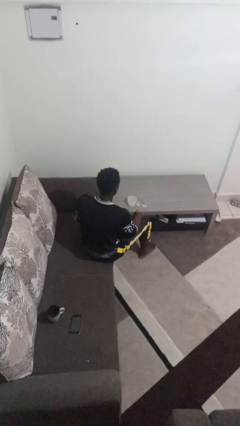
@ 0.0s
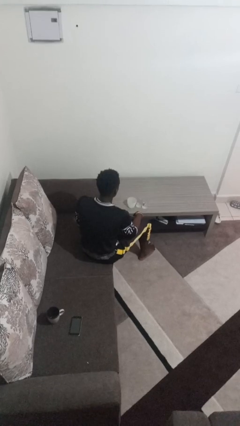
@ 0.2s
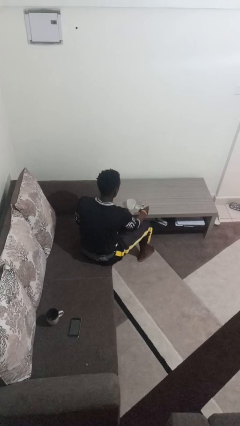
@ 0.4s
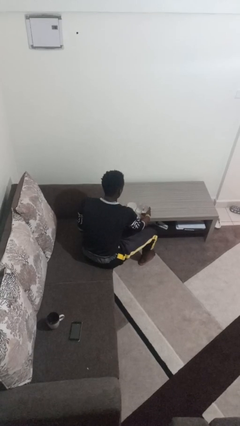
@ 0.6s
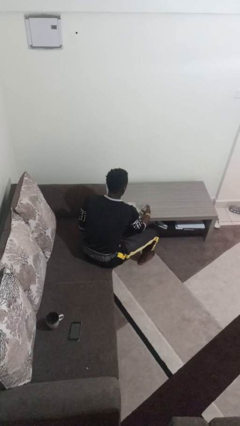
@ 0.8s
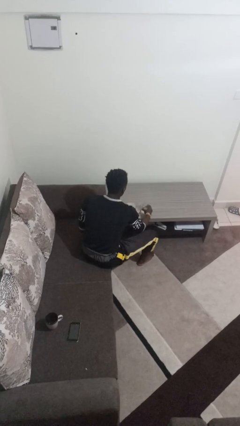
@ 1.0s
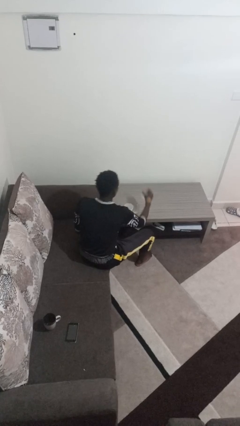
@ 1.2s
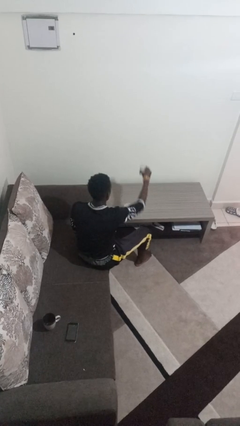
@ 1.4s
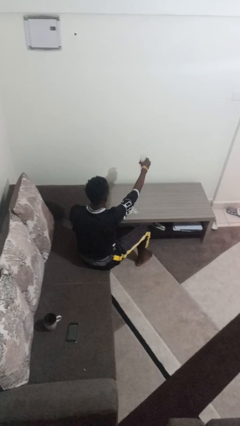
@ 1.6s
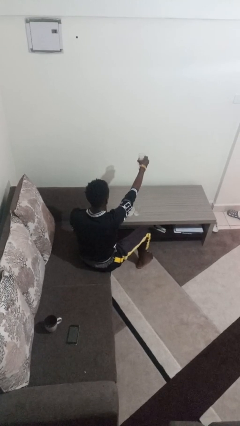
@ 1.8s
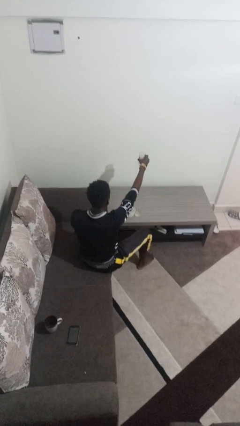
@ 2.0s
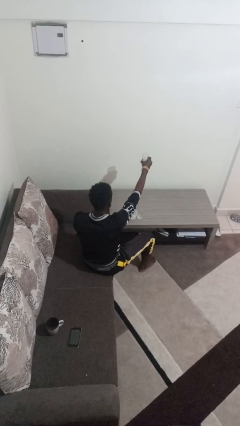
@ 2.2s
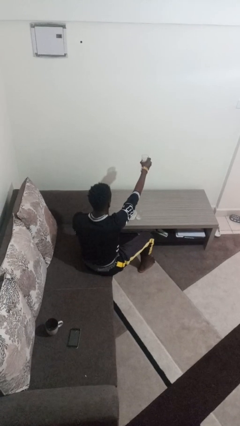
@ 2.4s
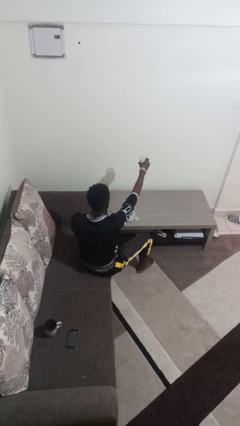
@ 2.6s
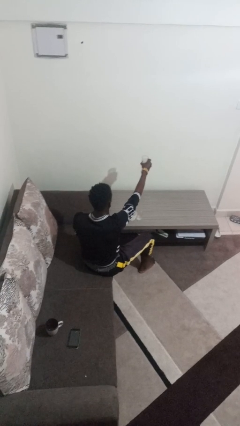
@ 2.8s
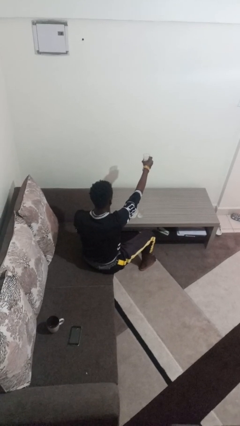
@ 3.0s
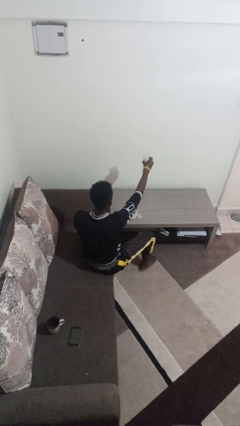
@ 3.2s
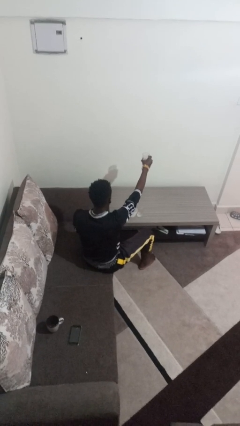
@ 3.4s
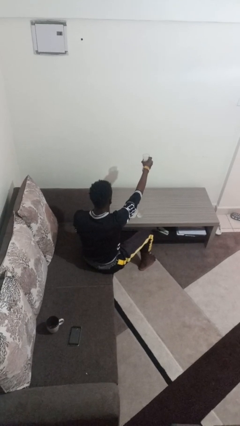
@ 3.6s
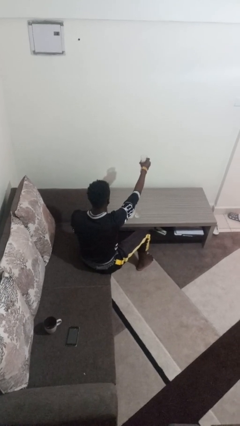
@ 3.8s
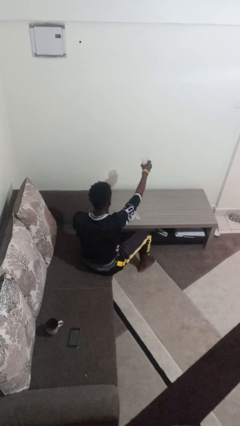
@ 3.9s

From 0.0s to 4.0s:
person picks up object from table

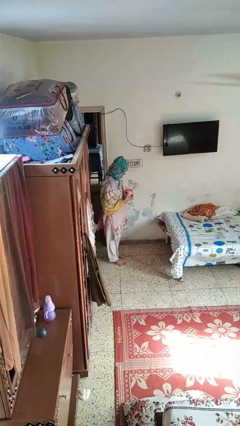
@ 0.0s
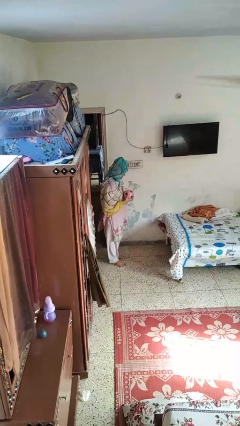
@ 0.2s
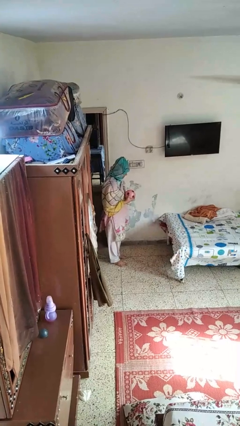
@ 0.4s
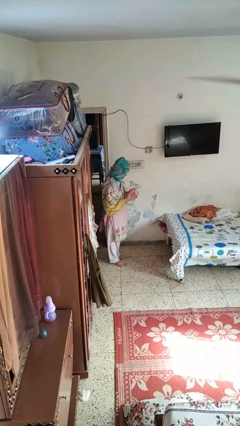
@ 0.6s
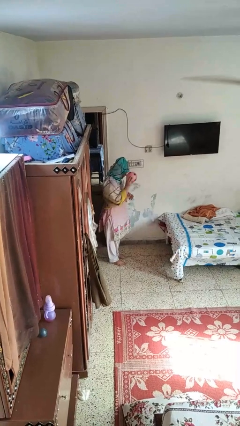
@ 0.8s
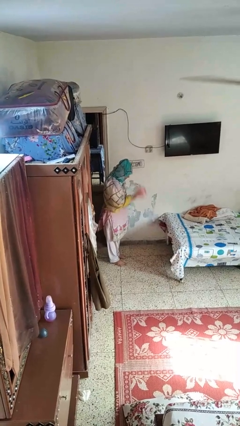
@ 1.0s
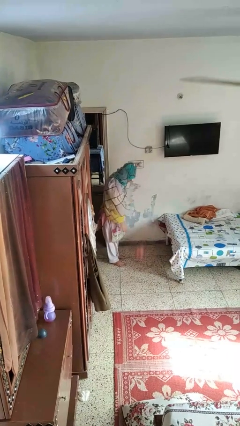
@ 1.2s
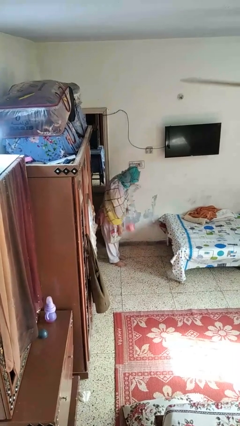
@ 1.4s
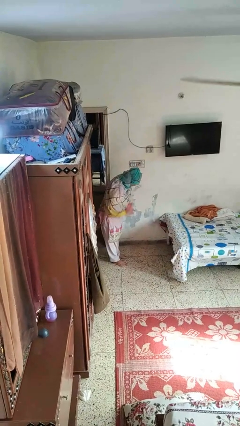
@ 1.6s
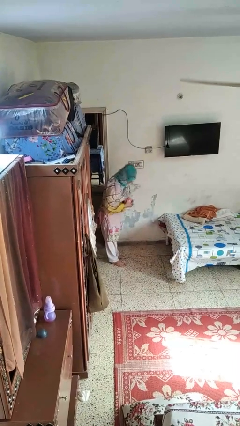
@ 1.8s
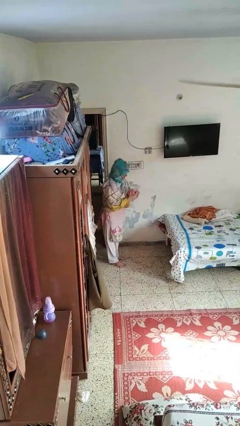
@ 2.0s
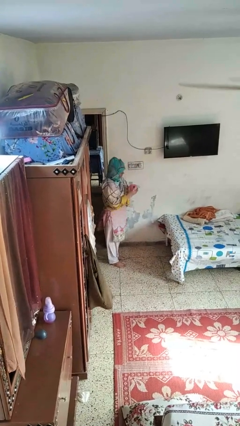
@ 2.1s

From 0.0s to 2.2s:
person bounces ball on floor

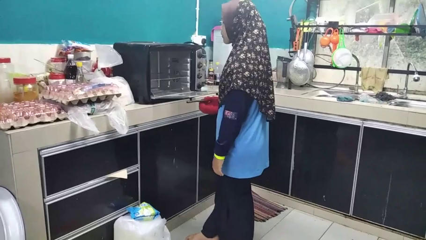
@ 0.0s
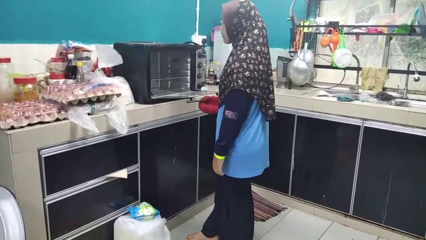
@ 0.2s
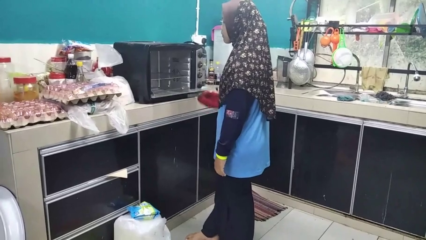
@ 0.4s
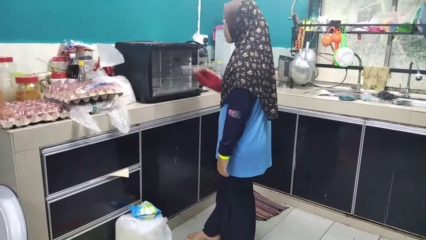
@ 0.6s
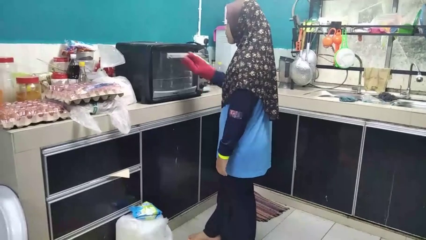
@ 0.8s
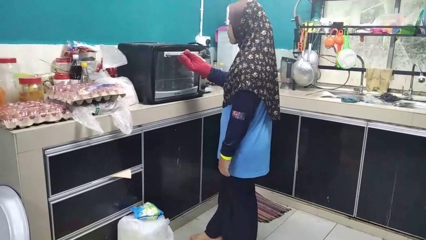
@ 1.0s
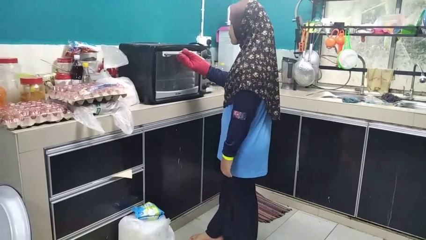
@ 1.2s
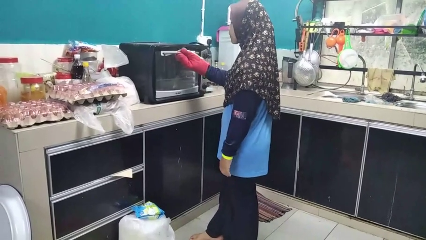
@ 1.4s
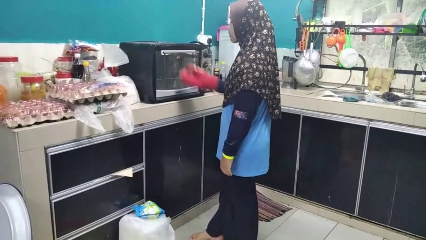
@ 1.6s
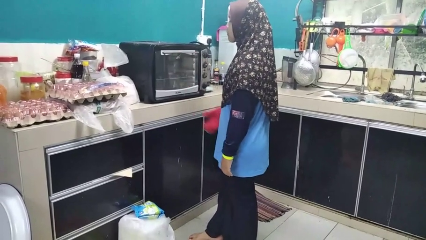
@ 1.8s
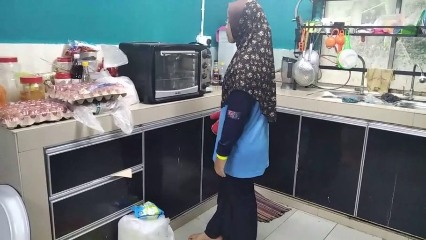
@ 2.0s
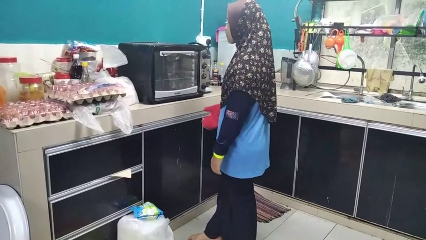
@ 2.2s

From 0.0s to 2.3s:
person closes oven door

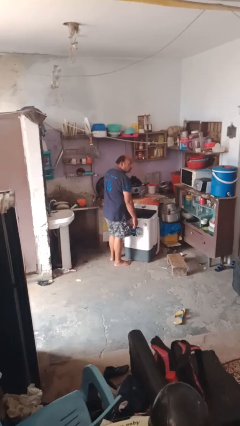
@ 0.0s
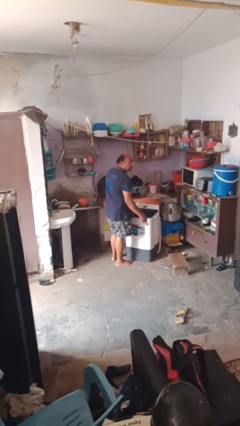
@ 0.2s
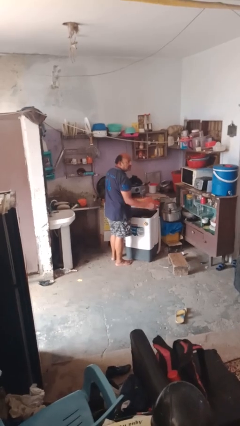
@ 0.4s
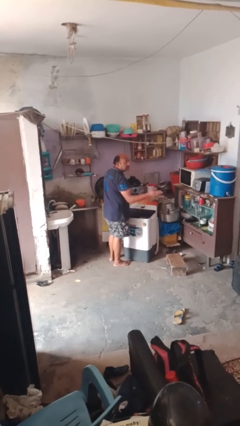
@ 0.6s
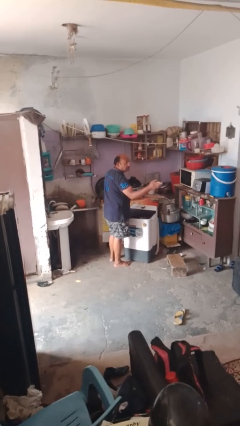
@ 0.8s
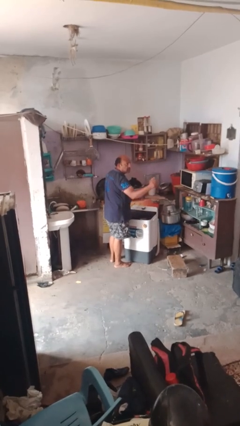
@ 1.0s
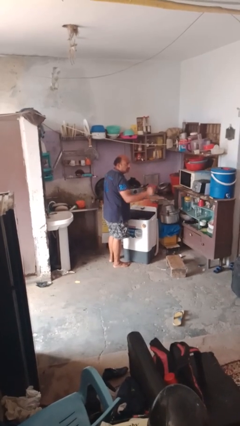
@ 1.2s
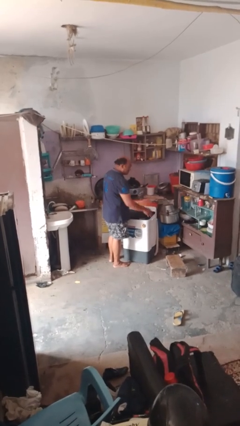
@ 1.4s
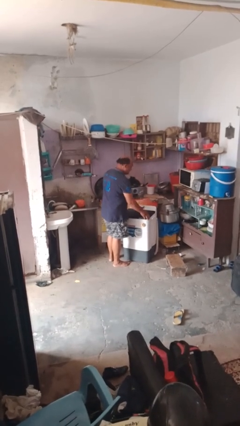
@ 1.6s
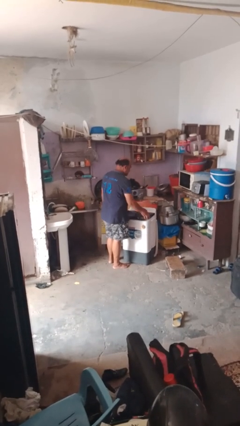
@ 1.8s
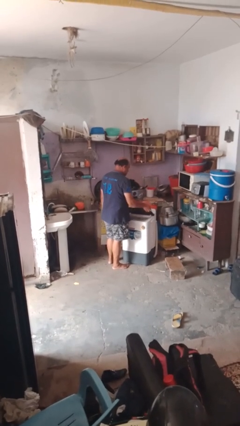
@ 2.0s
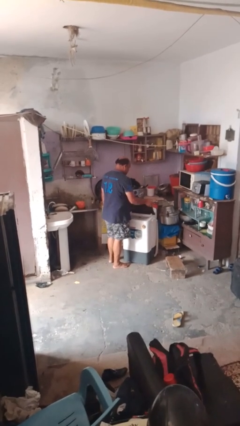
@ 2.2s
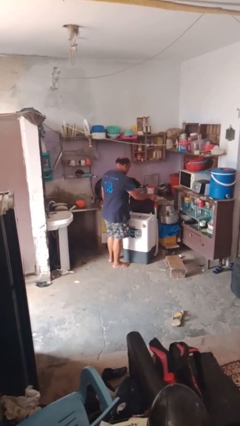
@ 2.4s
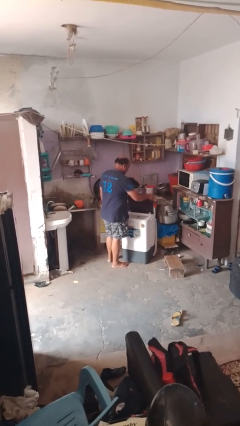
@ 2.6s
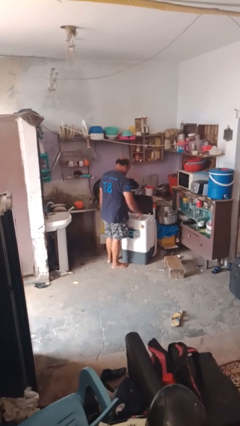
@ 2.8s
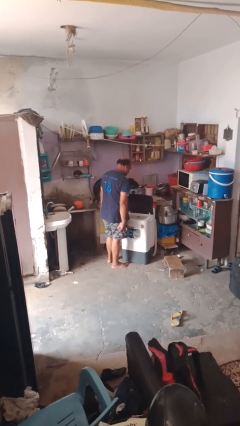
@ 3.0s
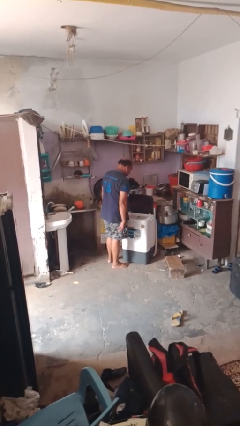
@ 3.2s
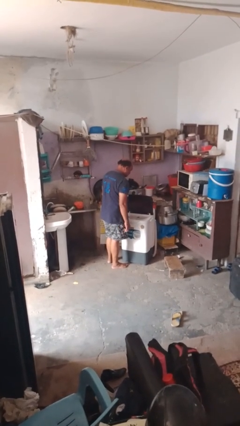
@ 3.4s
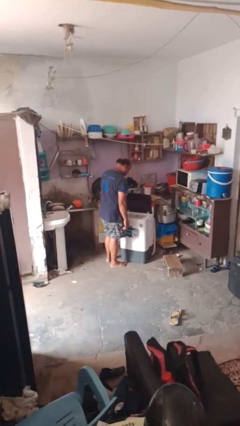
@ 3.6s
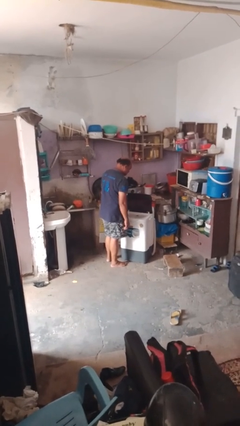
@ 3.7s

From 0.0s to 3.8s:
person opens clothes washer

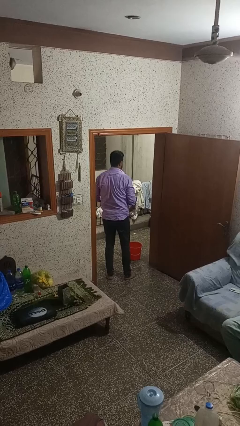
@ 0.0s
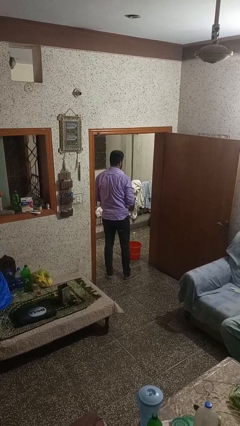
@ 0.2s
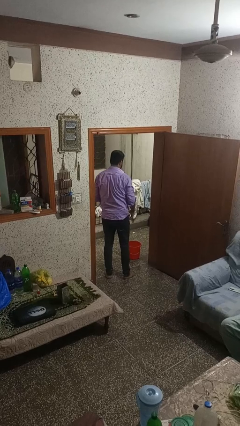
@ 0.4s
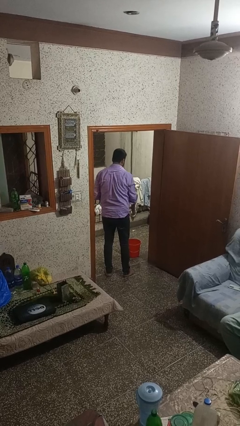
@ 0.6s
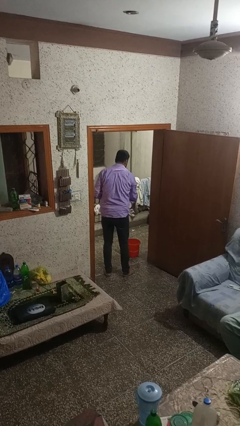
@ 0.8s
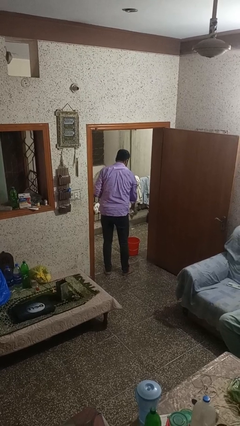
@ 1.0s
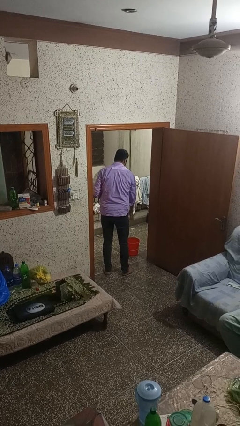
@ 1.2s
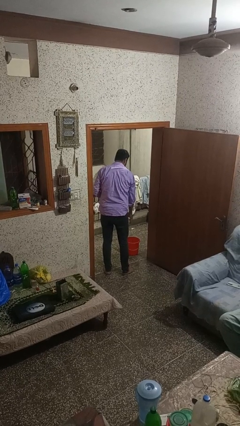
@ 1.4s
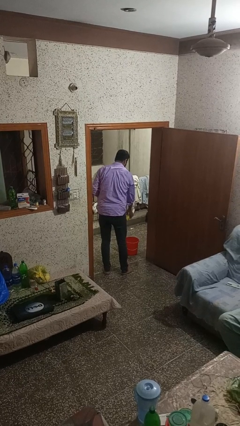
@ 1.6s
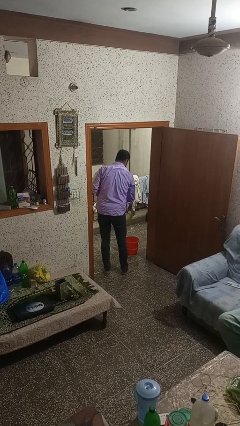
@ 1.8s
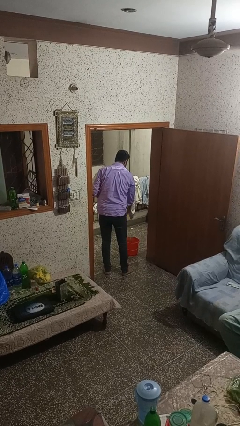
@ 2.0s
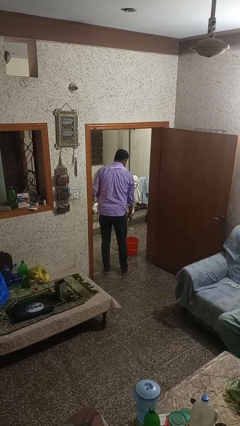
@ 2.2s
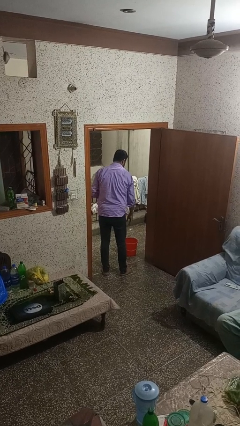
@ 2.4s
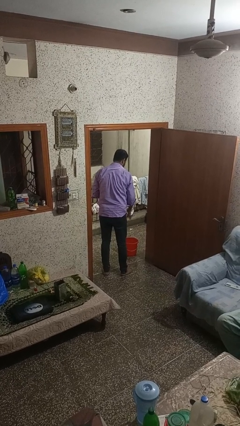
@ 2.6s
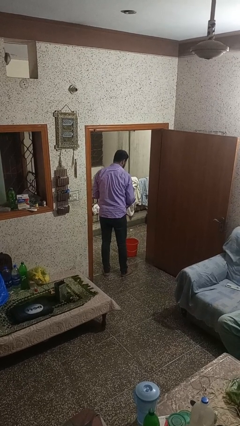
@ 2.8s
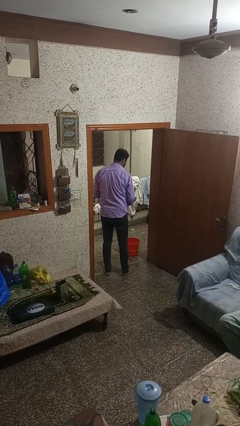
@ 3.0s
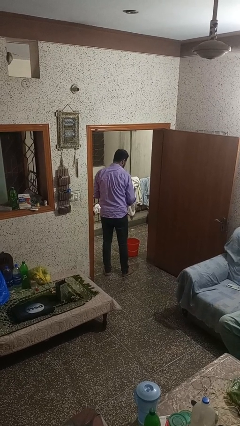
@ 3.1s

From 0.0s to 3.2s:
person discards trash

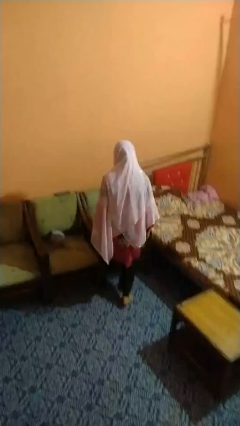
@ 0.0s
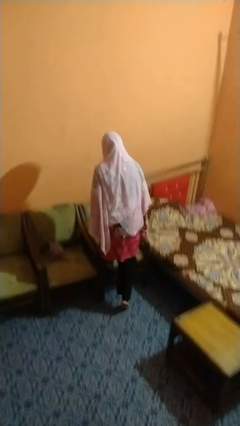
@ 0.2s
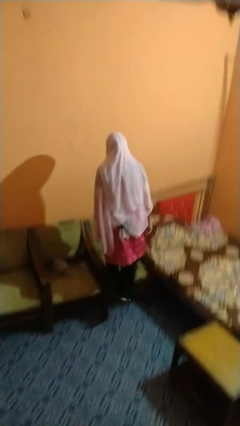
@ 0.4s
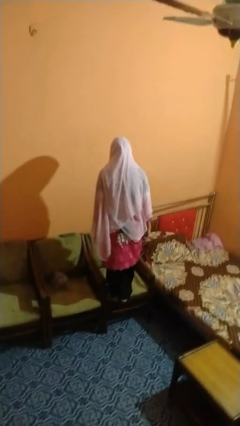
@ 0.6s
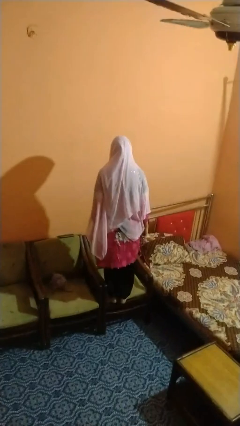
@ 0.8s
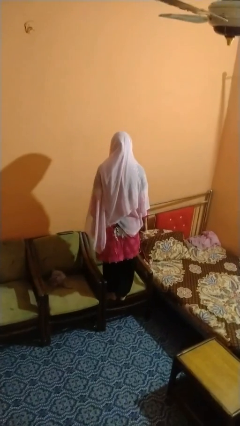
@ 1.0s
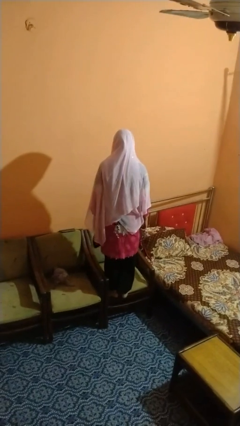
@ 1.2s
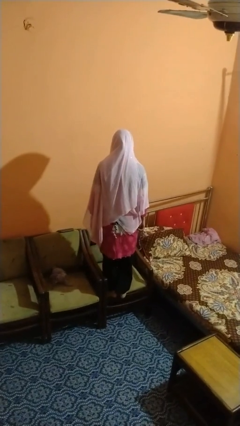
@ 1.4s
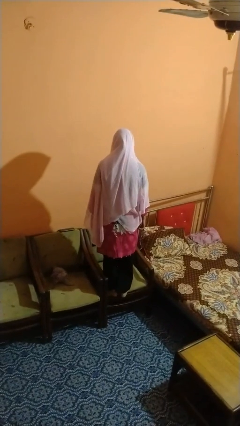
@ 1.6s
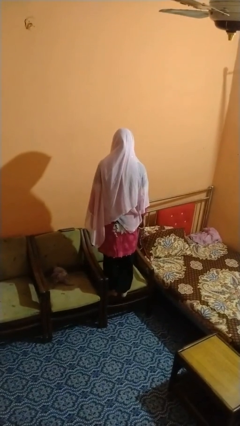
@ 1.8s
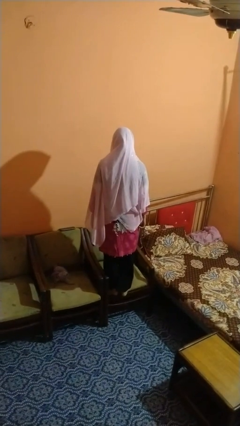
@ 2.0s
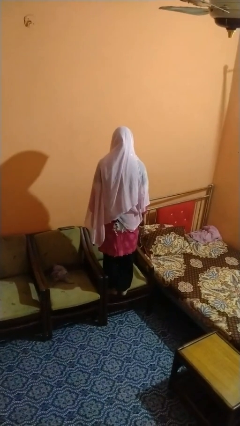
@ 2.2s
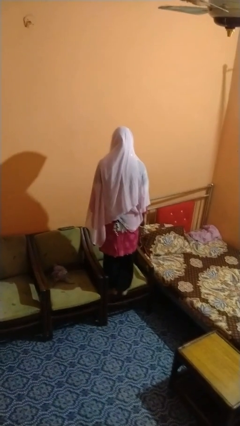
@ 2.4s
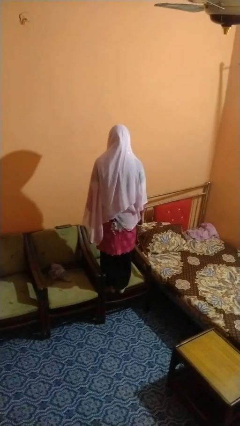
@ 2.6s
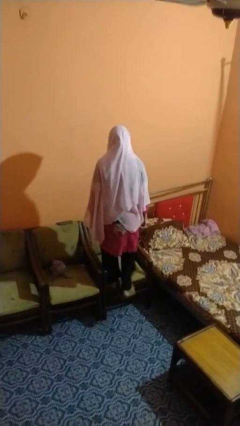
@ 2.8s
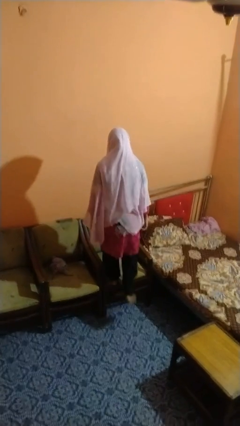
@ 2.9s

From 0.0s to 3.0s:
person climbs on chair
